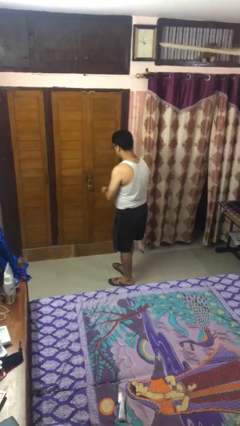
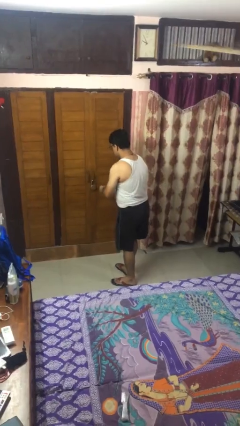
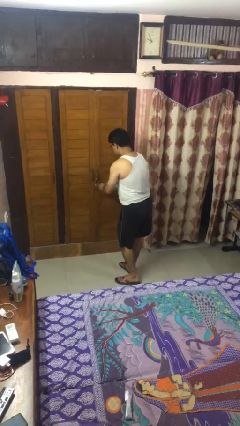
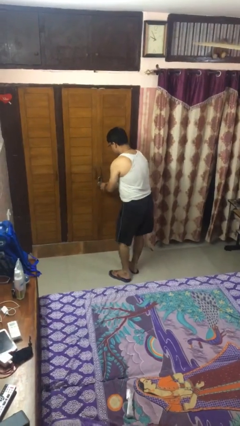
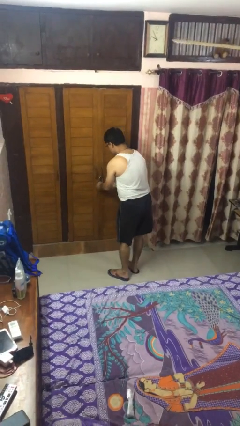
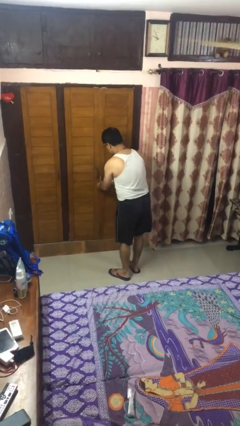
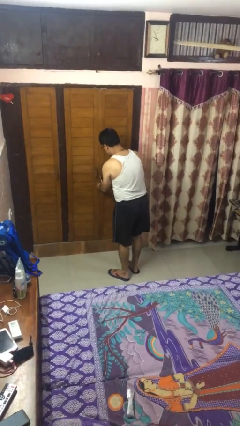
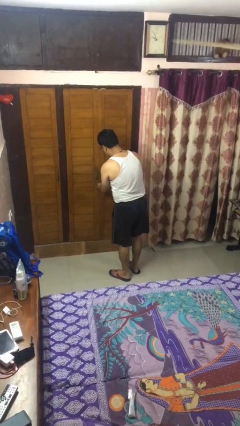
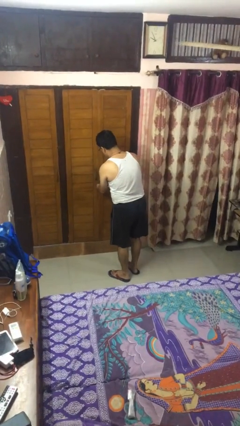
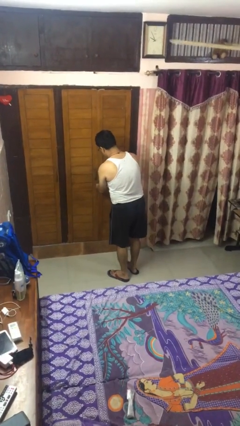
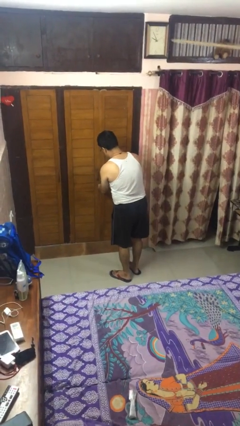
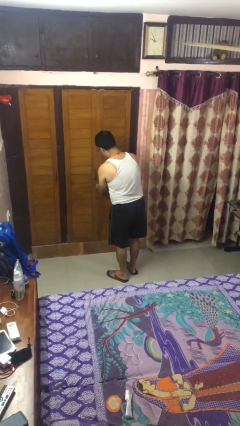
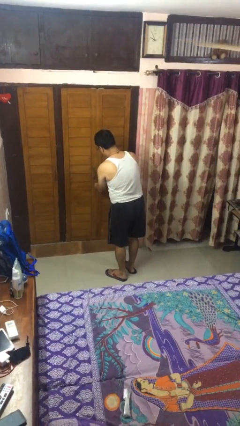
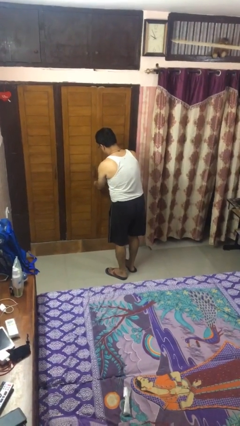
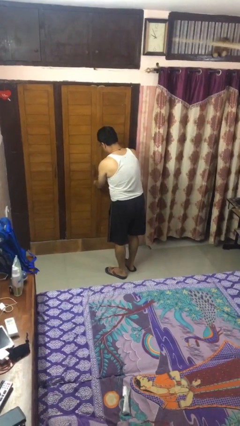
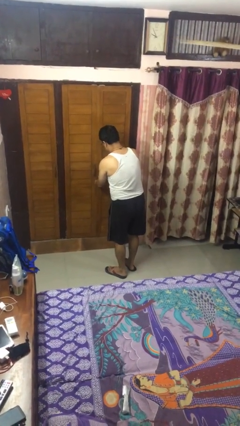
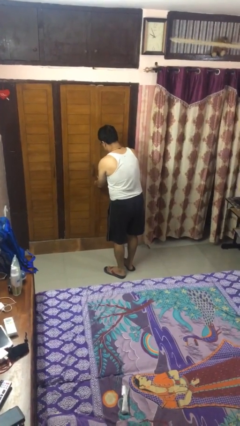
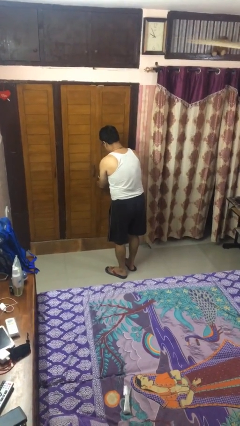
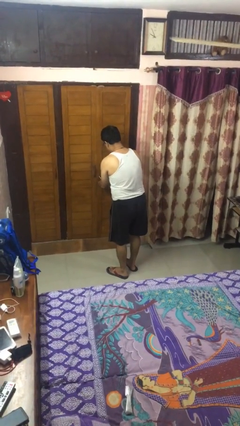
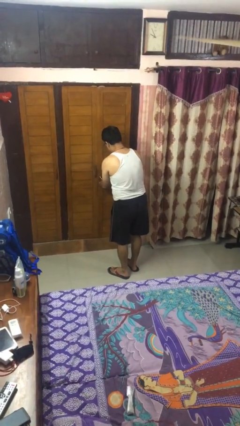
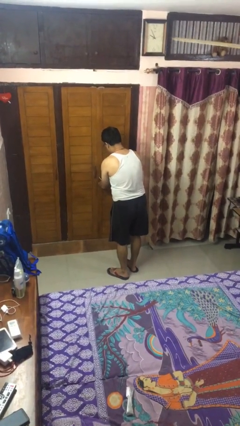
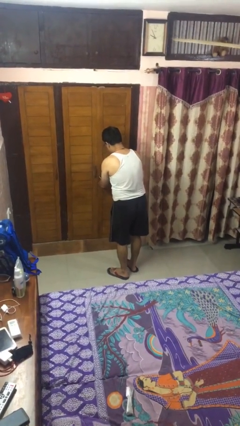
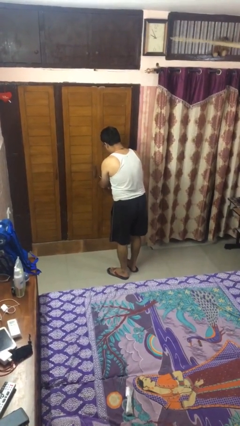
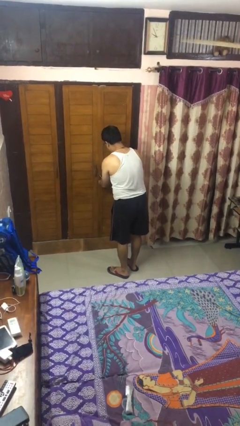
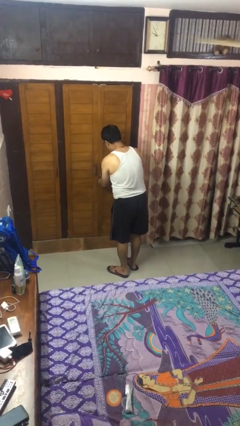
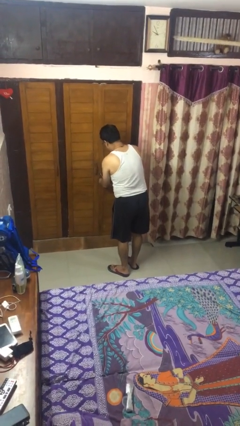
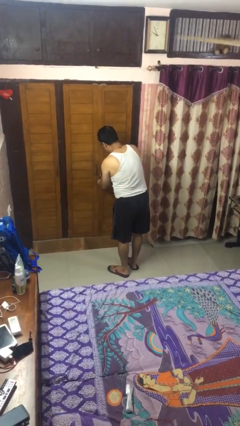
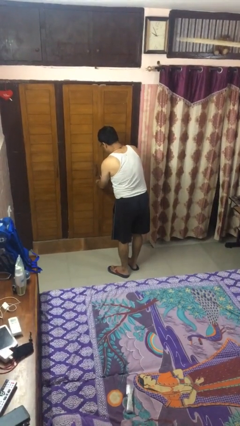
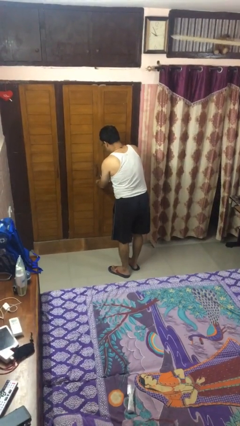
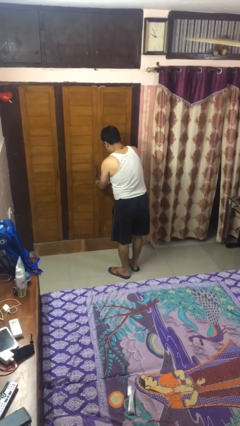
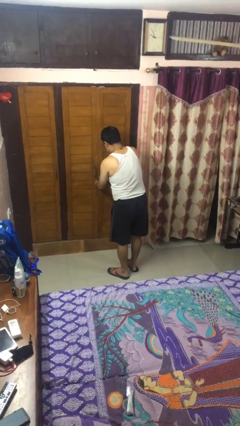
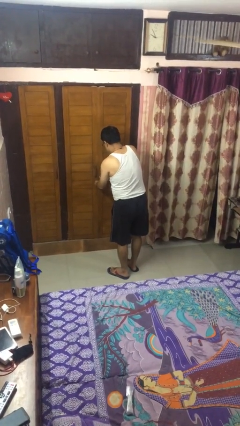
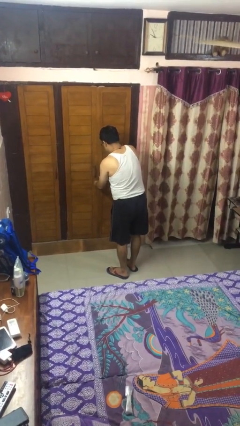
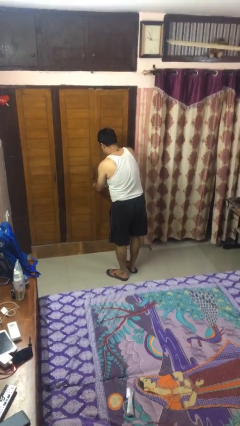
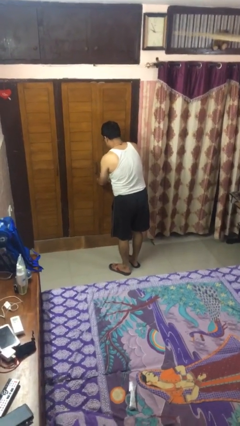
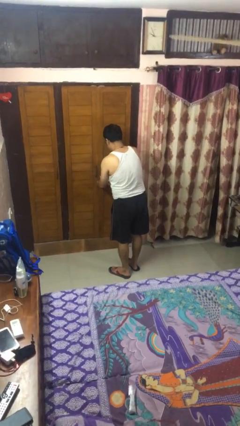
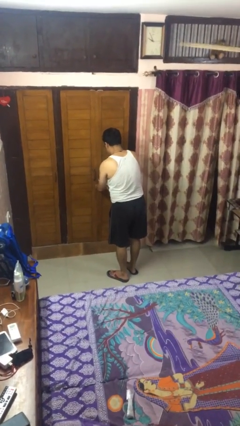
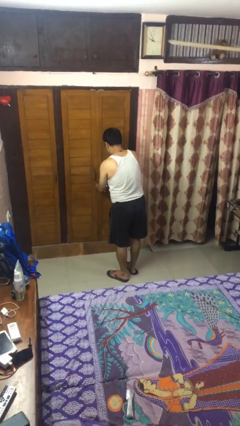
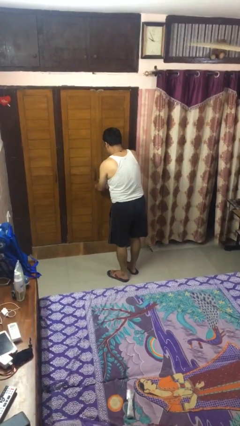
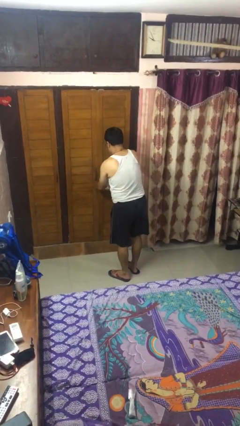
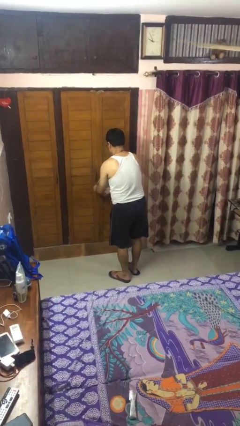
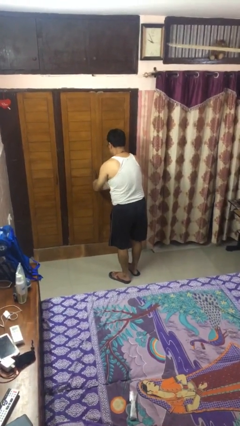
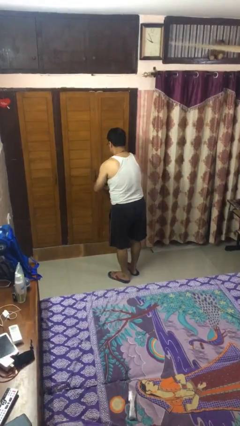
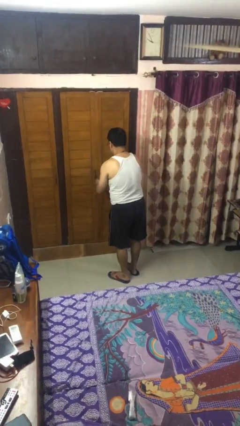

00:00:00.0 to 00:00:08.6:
person unlocks door with keys

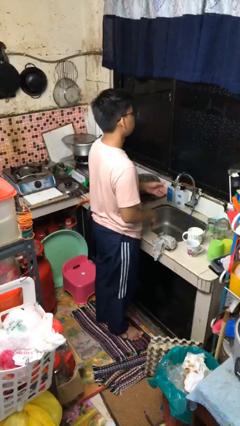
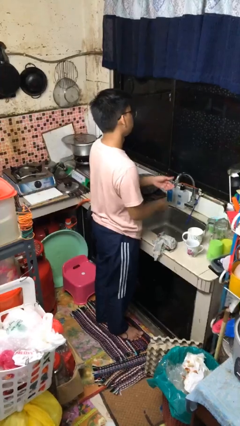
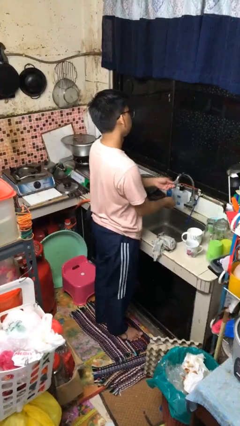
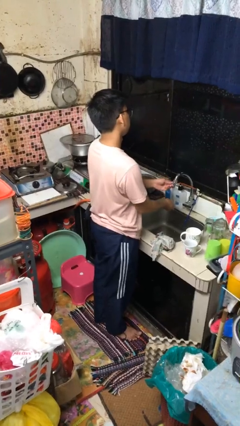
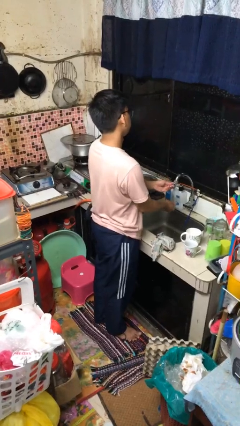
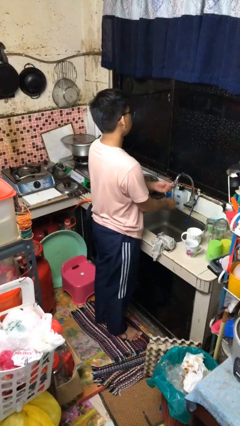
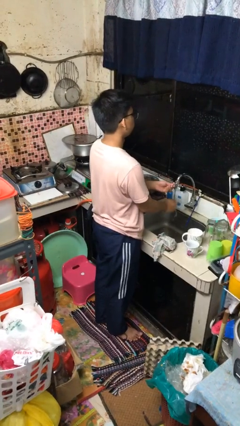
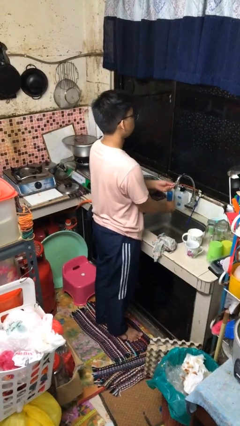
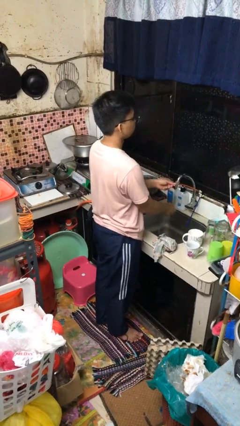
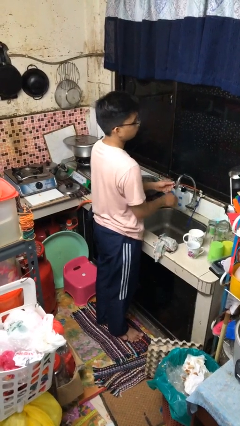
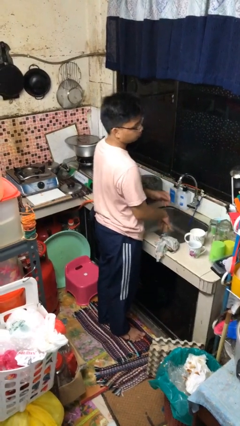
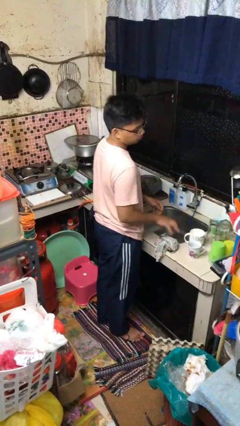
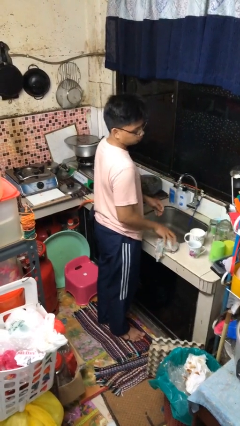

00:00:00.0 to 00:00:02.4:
person washes hands

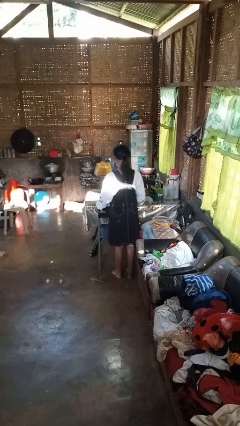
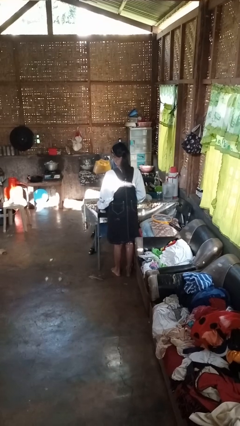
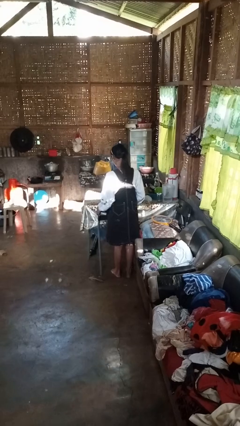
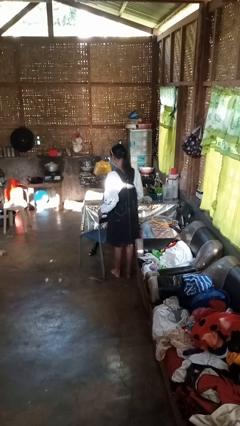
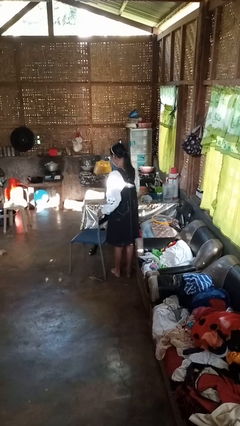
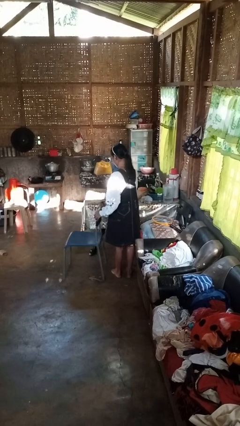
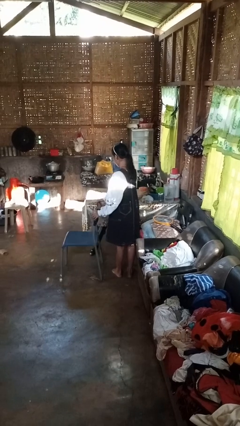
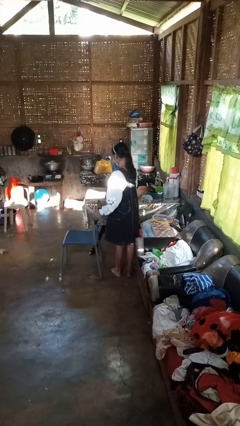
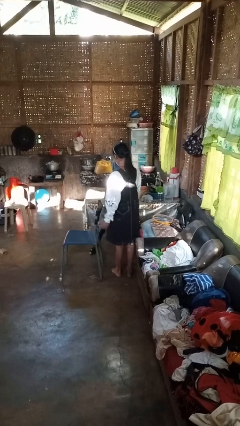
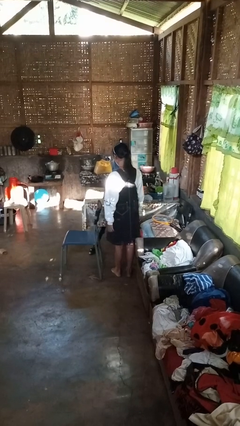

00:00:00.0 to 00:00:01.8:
person pulls out chair

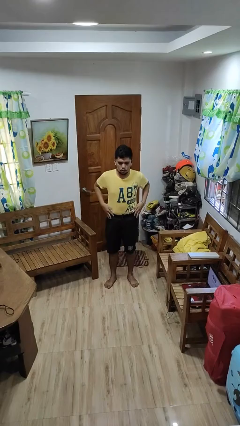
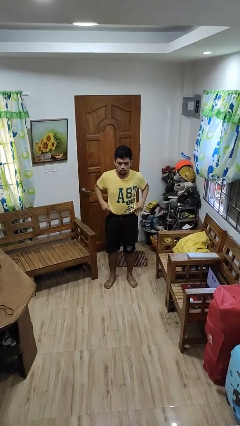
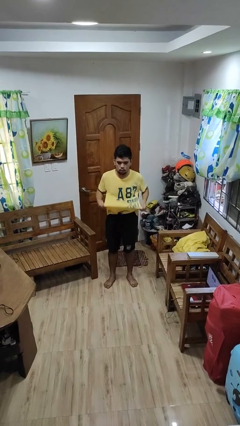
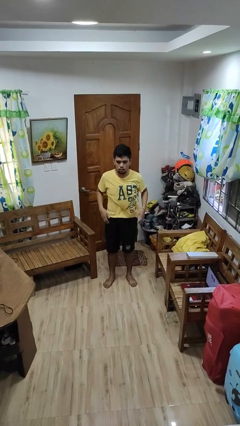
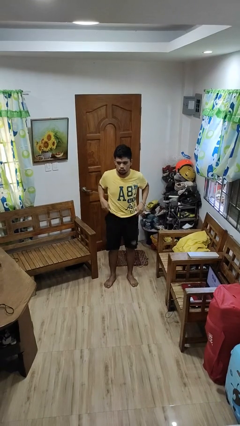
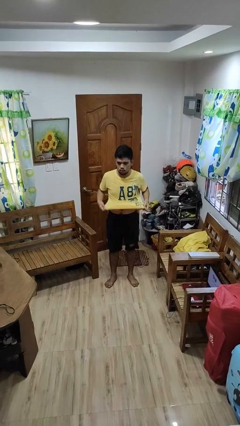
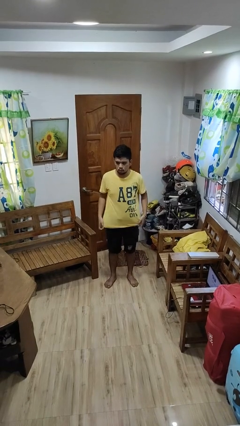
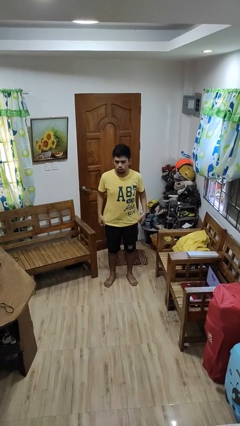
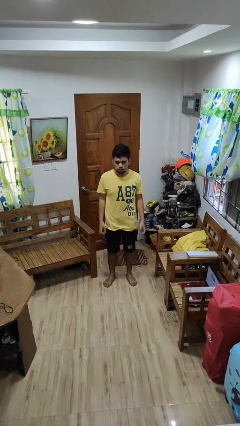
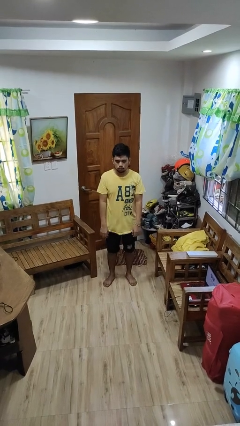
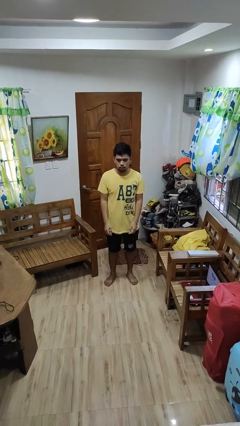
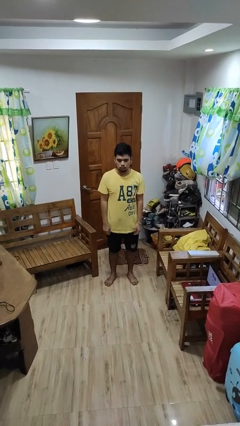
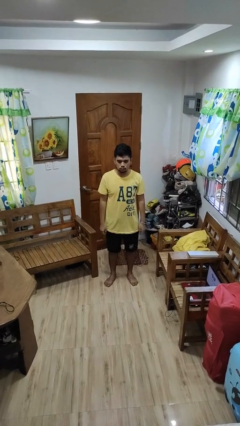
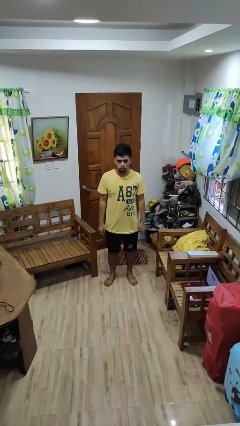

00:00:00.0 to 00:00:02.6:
person untucks shirt

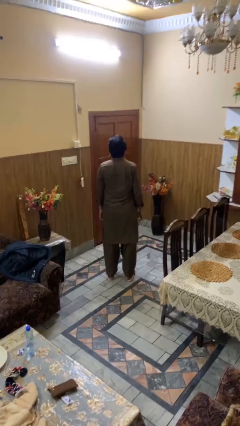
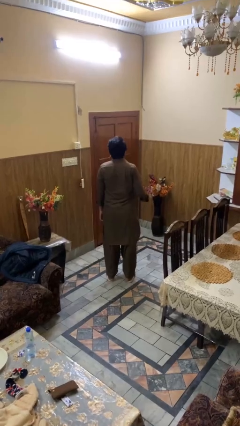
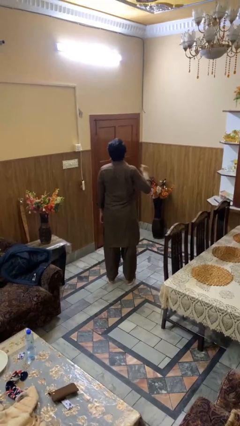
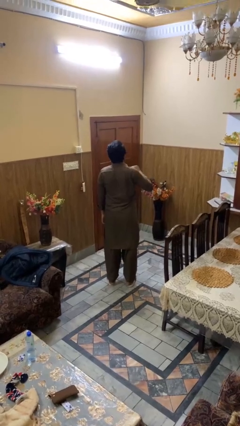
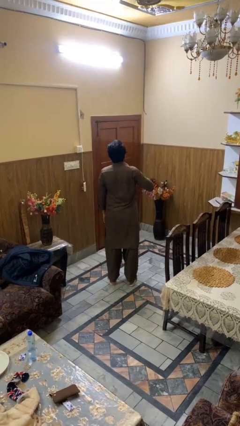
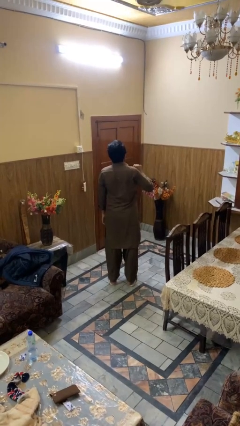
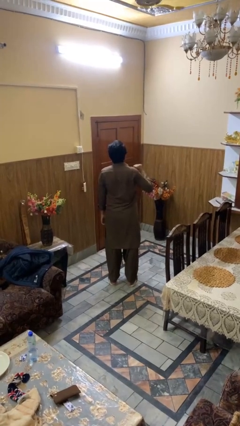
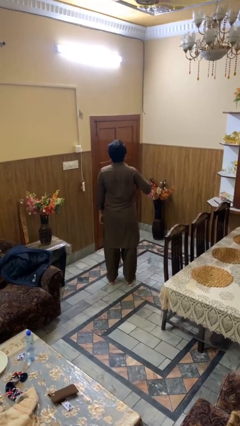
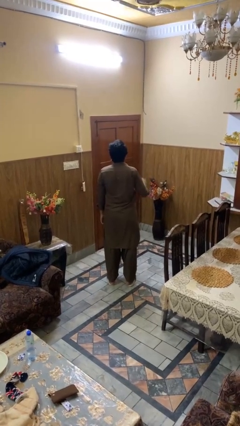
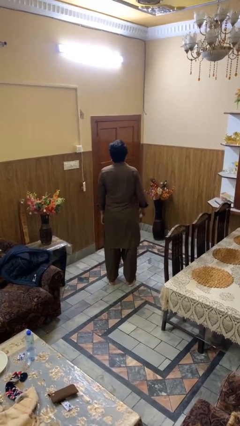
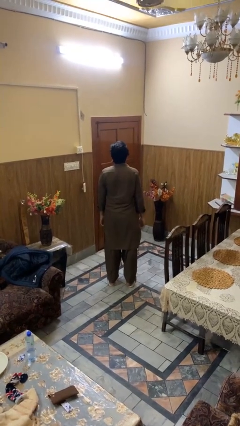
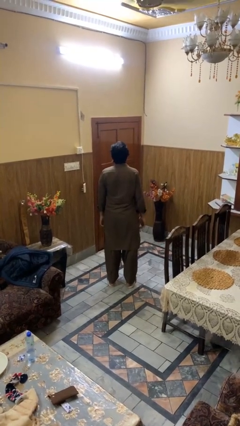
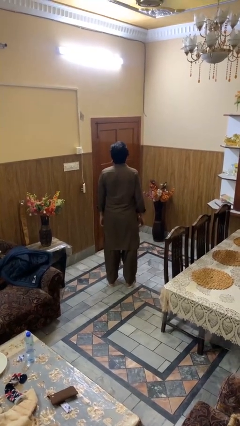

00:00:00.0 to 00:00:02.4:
person drums on chest
